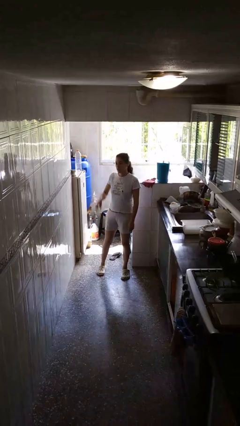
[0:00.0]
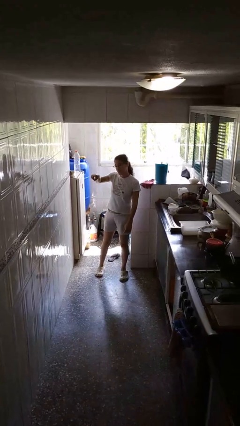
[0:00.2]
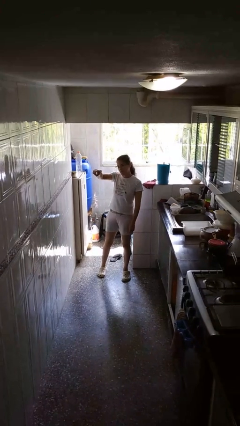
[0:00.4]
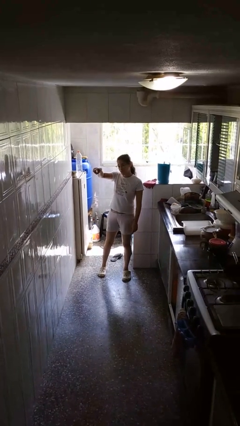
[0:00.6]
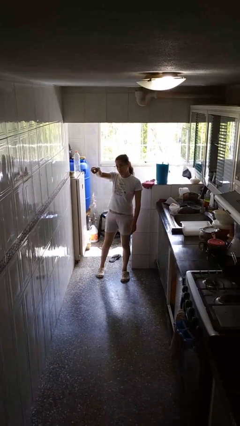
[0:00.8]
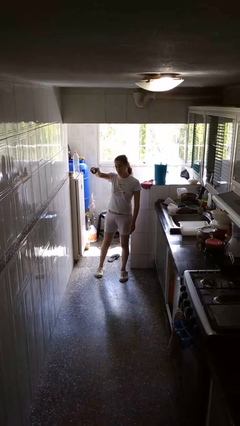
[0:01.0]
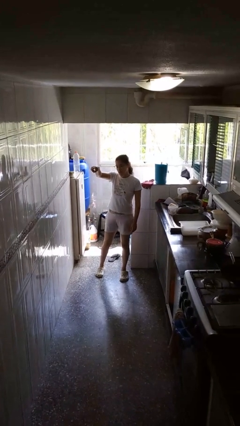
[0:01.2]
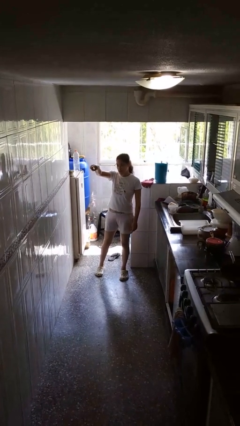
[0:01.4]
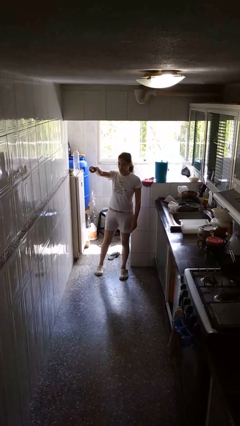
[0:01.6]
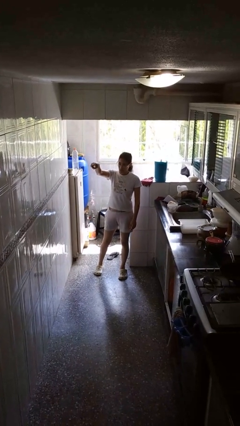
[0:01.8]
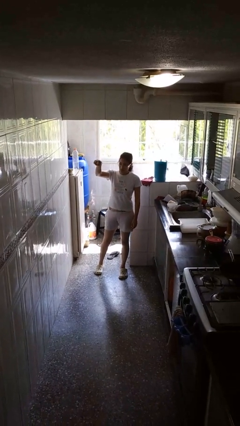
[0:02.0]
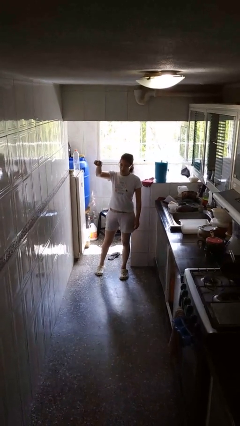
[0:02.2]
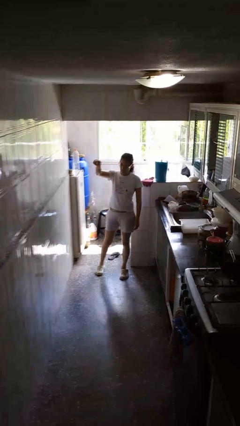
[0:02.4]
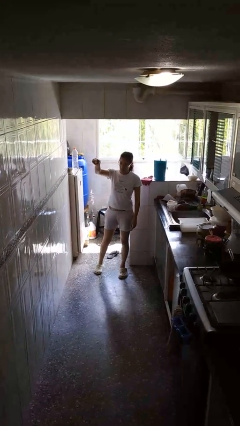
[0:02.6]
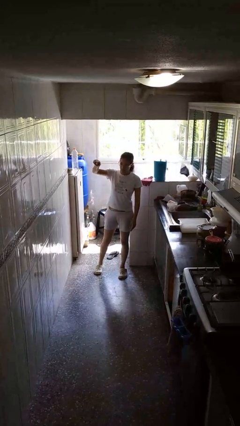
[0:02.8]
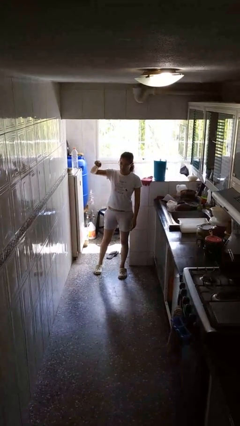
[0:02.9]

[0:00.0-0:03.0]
person points at person

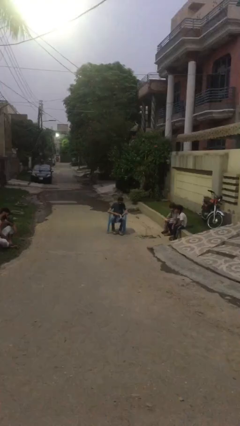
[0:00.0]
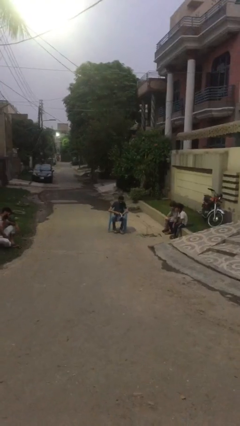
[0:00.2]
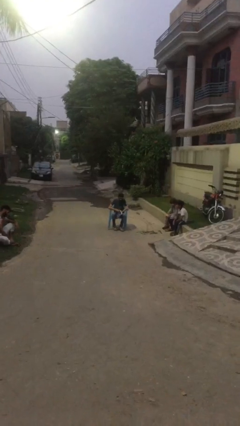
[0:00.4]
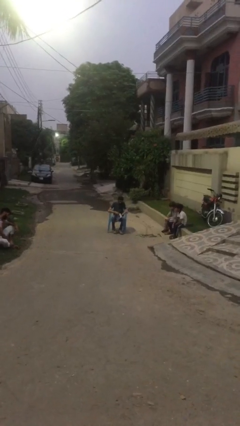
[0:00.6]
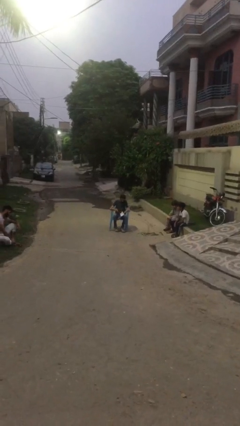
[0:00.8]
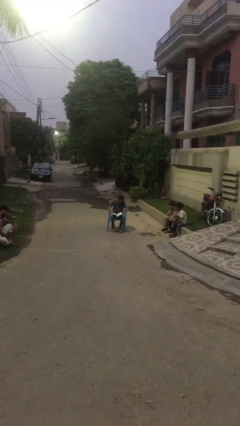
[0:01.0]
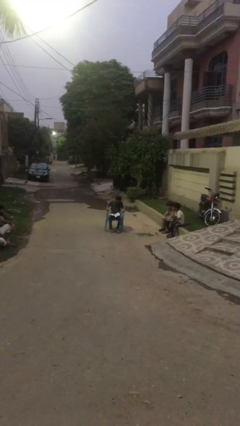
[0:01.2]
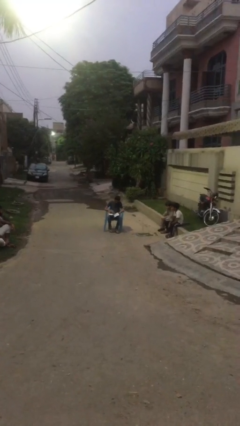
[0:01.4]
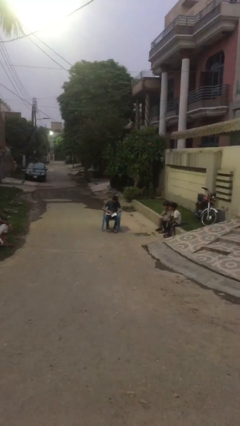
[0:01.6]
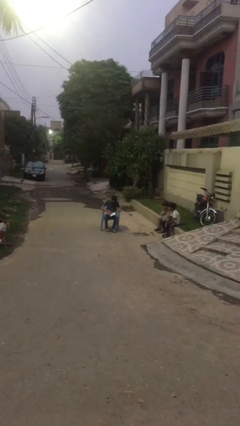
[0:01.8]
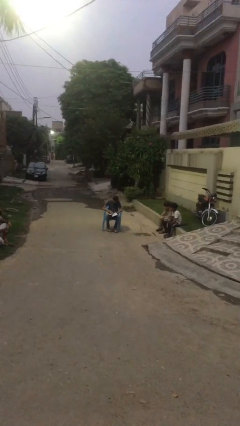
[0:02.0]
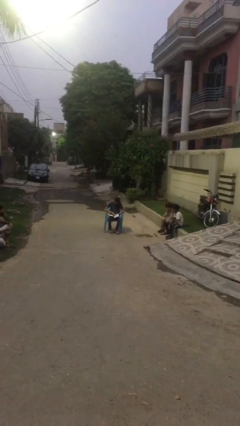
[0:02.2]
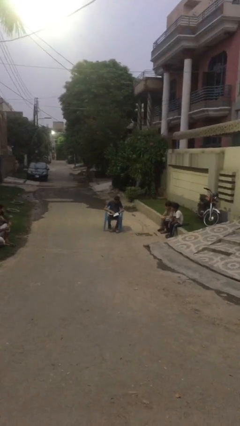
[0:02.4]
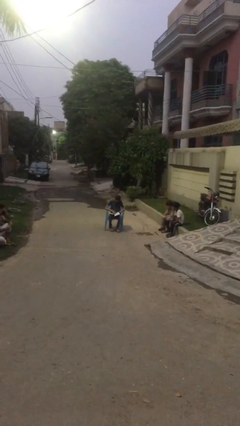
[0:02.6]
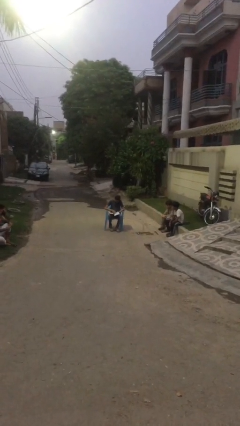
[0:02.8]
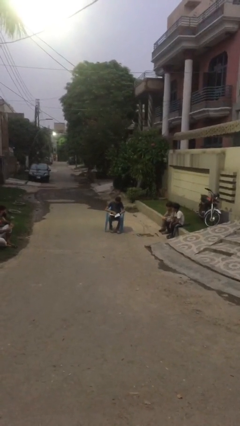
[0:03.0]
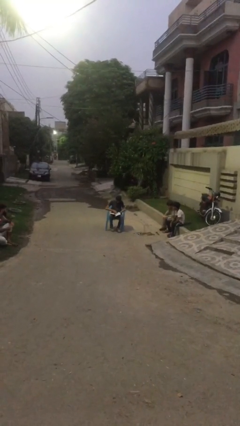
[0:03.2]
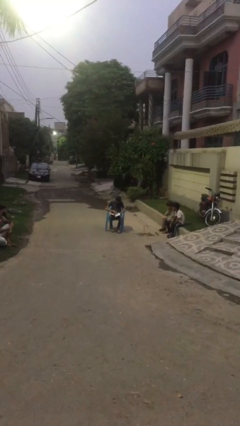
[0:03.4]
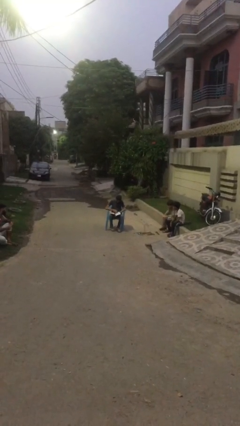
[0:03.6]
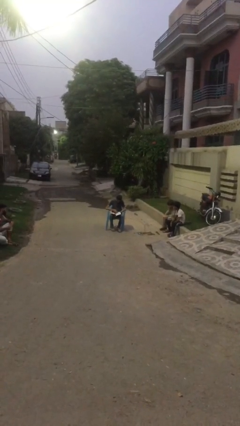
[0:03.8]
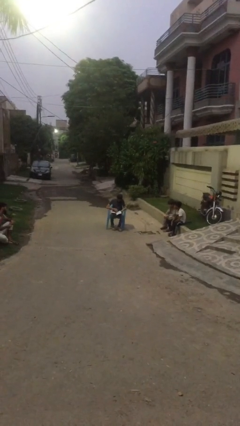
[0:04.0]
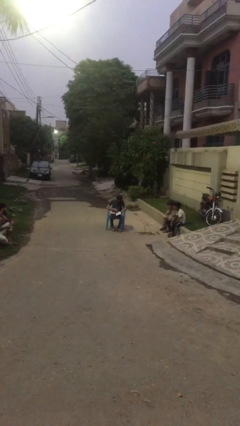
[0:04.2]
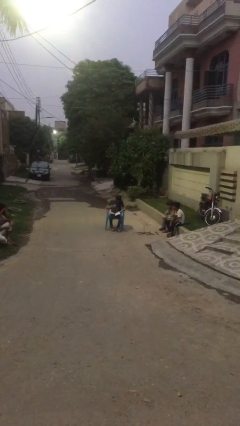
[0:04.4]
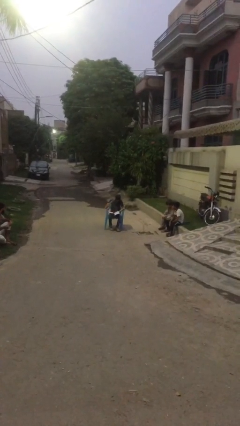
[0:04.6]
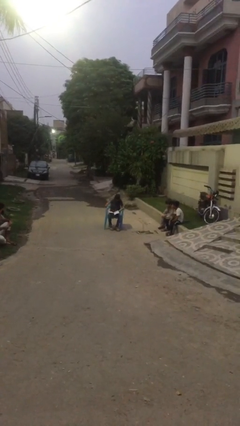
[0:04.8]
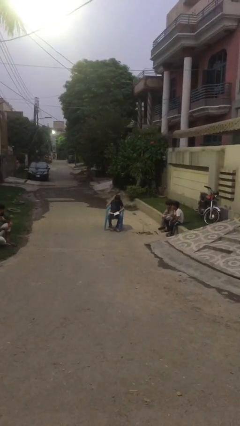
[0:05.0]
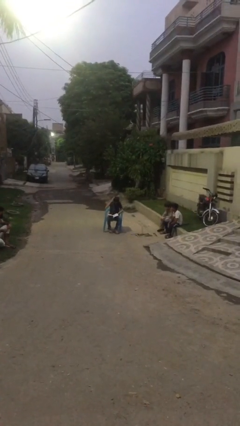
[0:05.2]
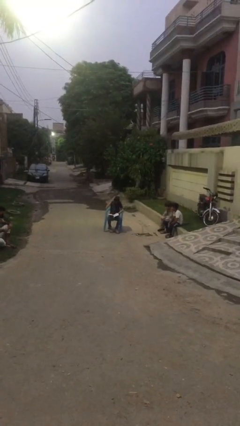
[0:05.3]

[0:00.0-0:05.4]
person reads document

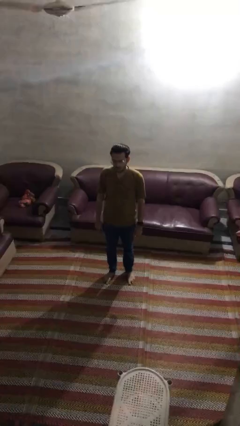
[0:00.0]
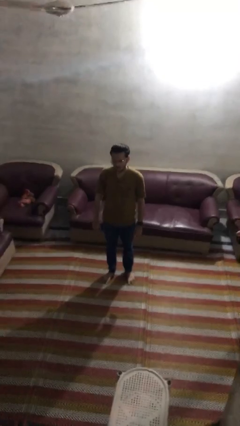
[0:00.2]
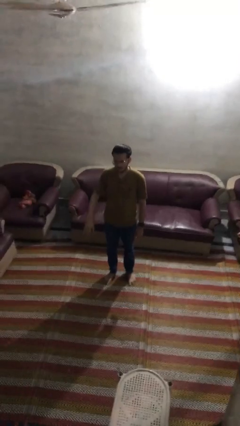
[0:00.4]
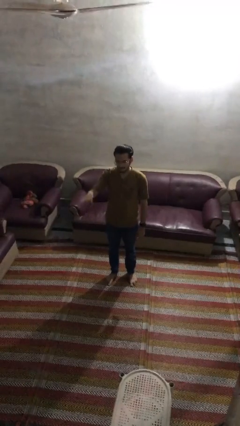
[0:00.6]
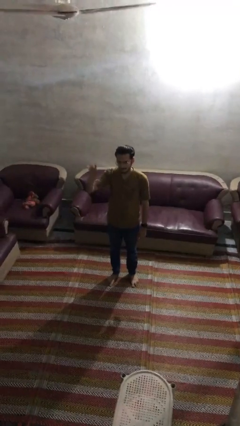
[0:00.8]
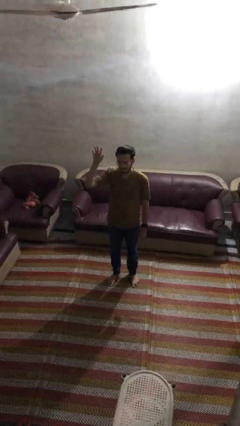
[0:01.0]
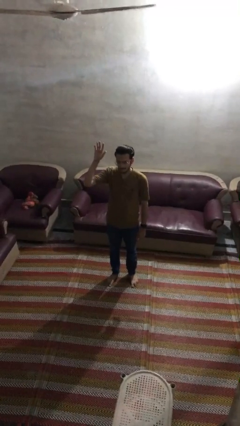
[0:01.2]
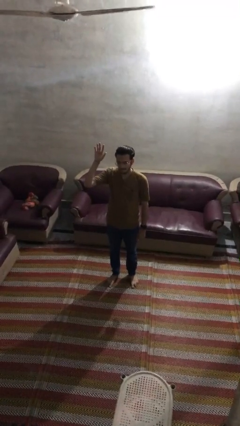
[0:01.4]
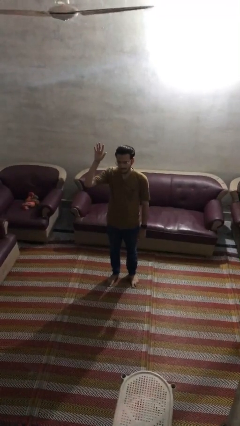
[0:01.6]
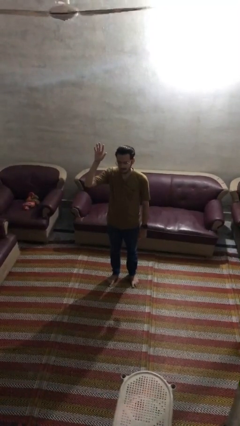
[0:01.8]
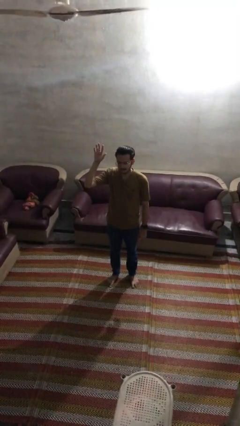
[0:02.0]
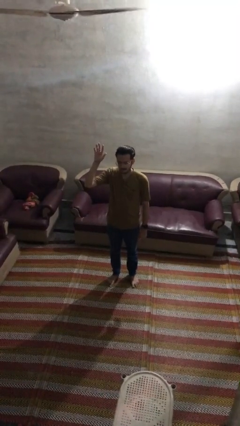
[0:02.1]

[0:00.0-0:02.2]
person gestures raise hand

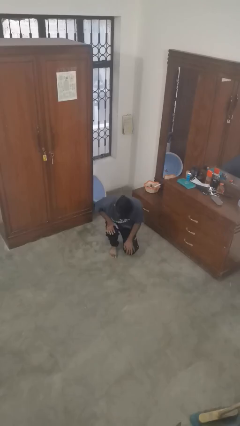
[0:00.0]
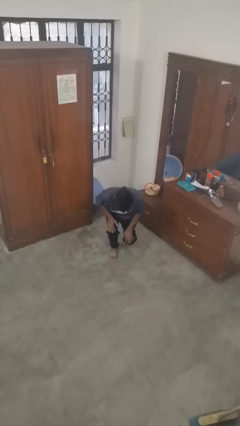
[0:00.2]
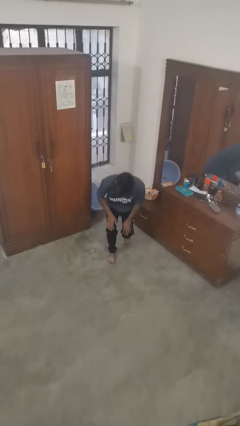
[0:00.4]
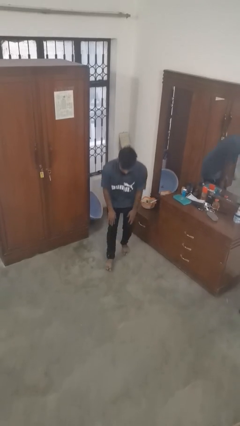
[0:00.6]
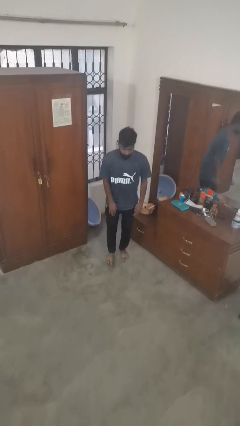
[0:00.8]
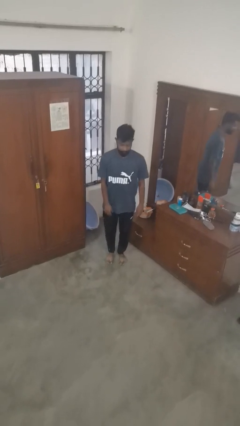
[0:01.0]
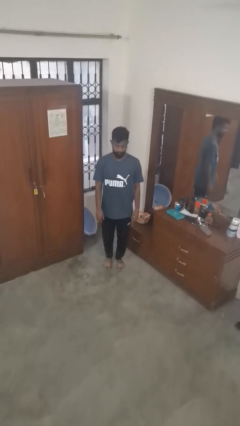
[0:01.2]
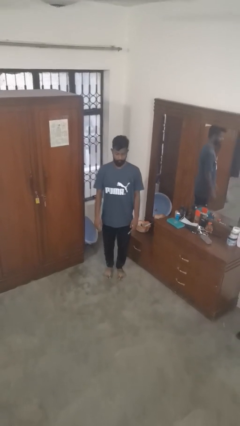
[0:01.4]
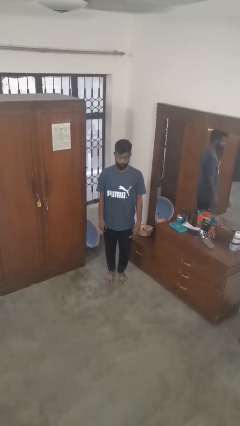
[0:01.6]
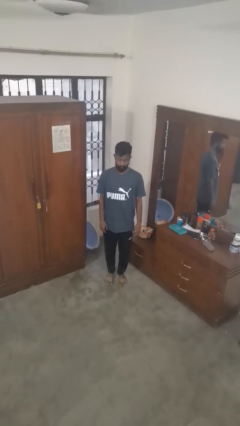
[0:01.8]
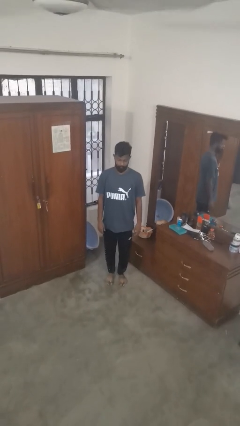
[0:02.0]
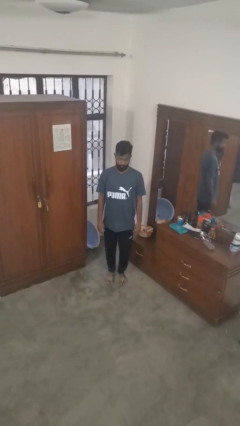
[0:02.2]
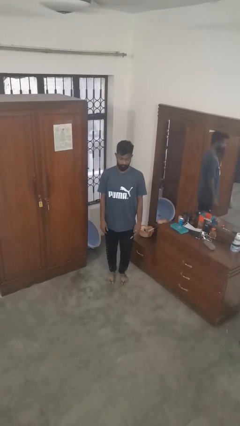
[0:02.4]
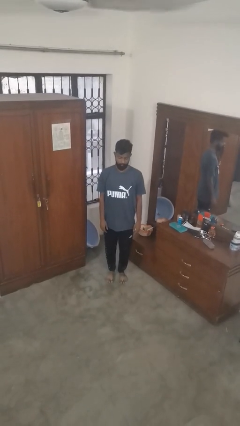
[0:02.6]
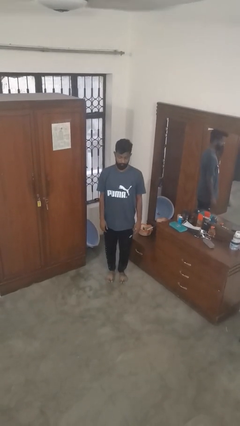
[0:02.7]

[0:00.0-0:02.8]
person stands up from floor

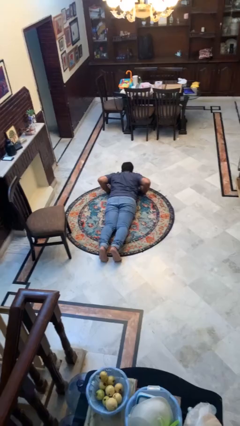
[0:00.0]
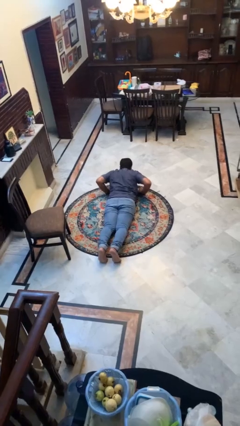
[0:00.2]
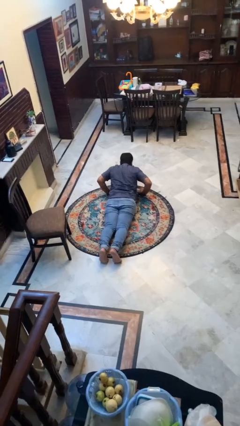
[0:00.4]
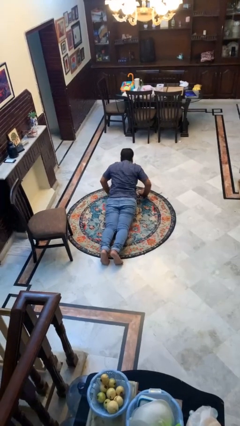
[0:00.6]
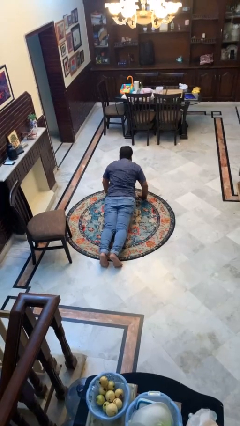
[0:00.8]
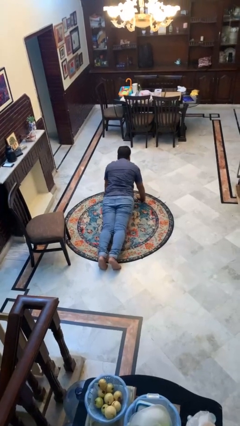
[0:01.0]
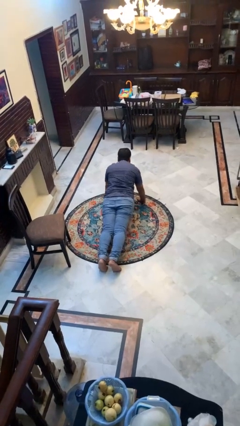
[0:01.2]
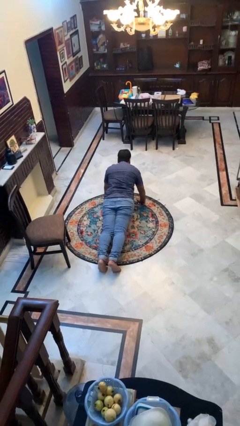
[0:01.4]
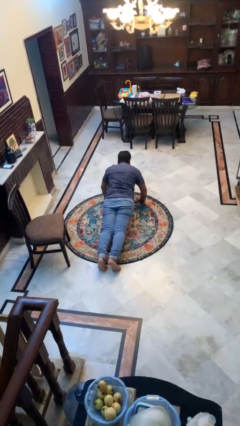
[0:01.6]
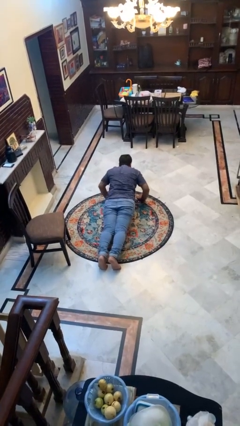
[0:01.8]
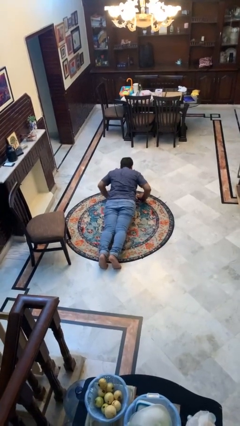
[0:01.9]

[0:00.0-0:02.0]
person exercises with pushup

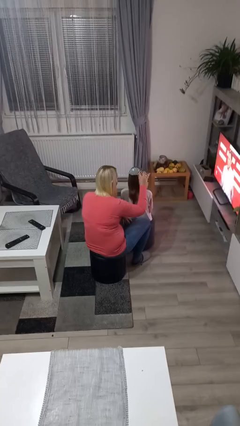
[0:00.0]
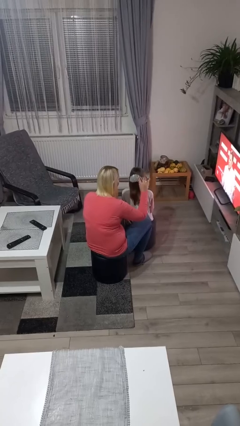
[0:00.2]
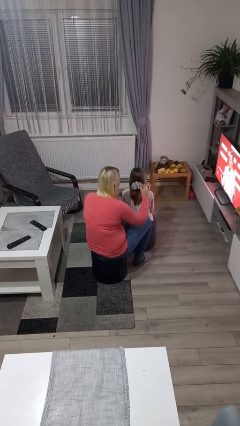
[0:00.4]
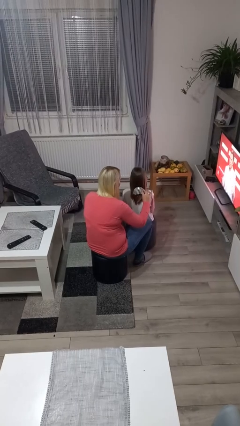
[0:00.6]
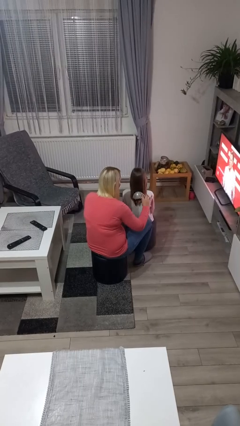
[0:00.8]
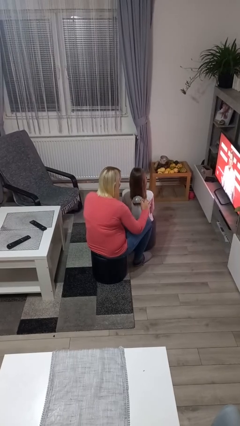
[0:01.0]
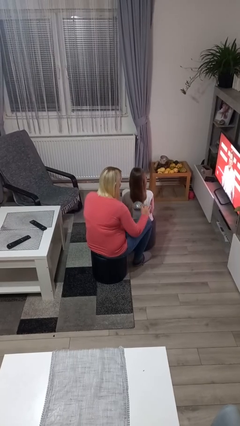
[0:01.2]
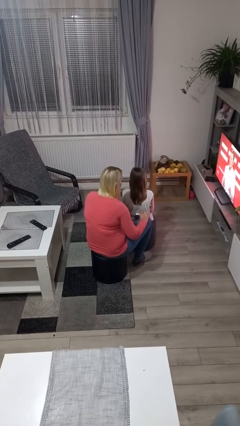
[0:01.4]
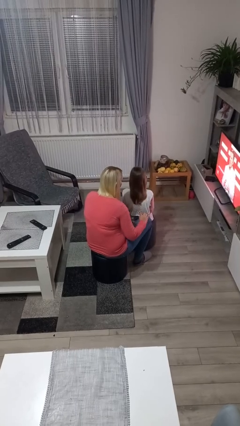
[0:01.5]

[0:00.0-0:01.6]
person brushes hair of person

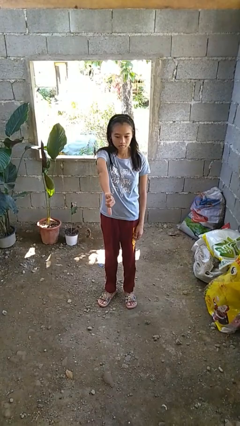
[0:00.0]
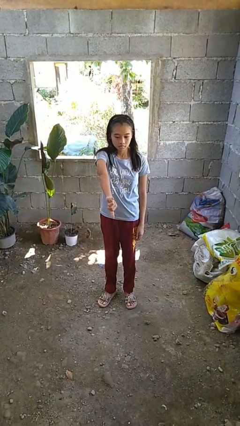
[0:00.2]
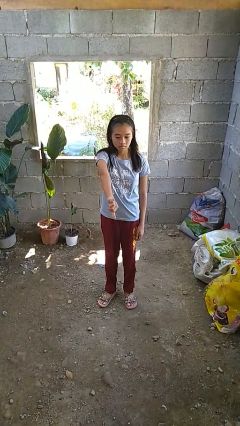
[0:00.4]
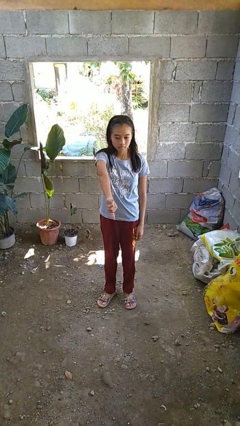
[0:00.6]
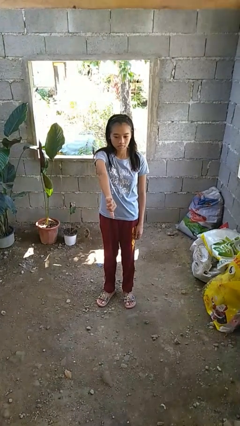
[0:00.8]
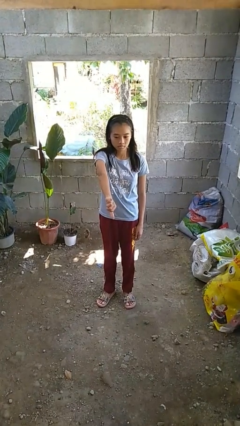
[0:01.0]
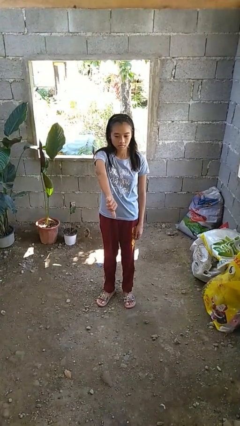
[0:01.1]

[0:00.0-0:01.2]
person gestures thumbs down
